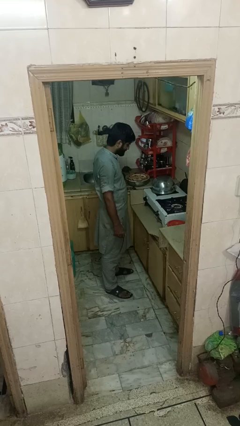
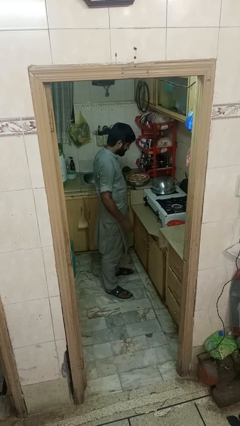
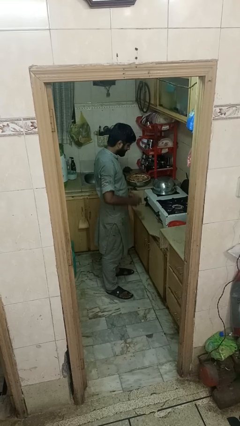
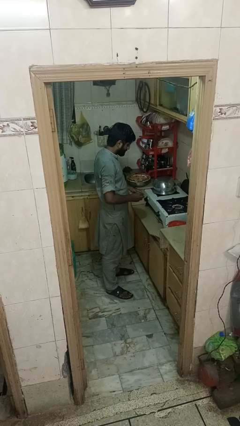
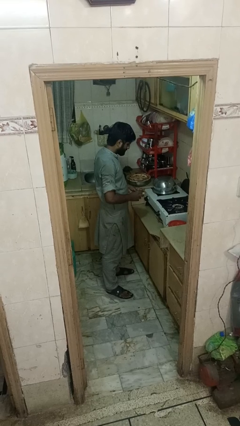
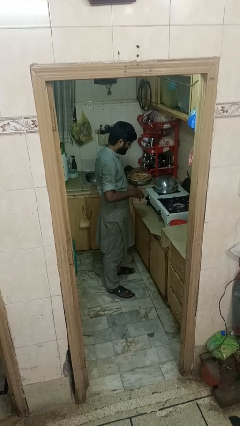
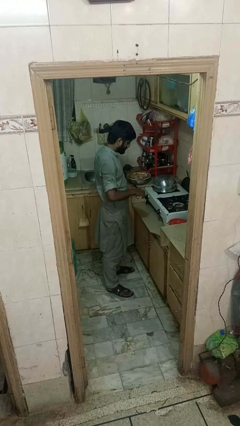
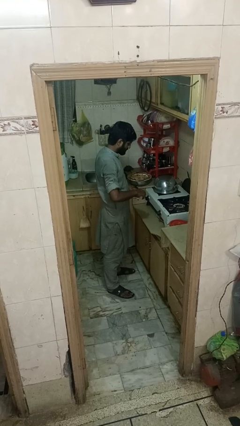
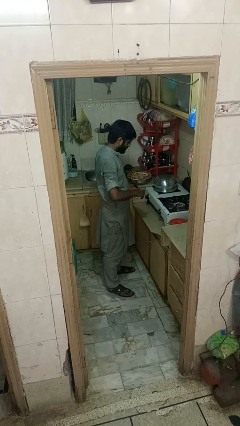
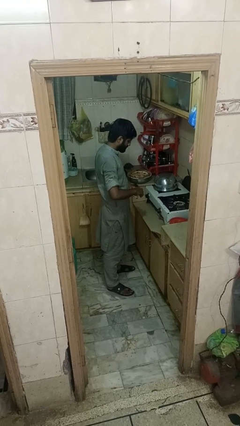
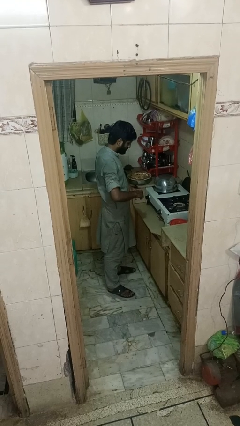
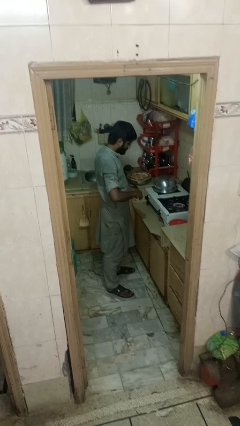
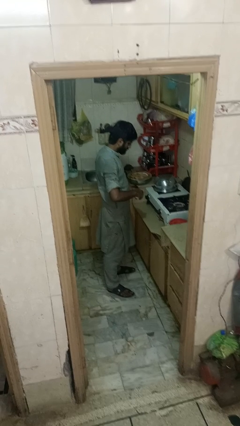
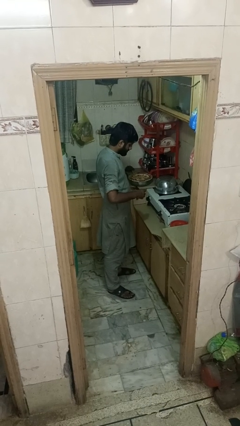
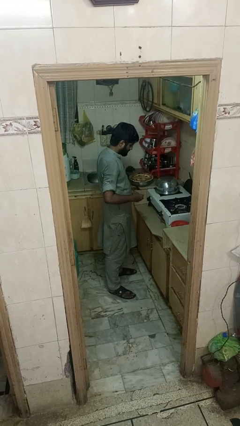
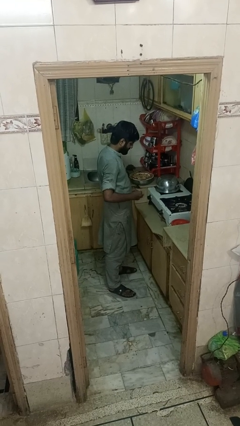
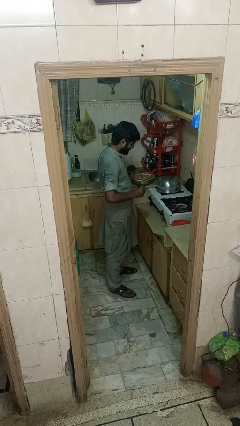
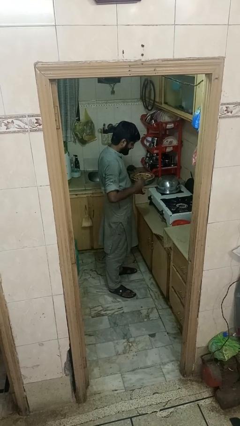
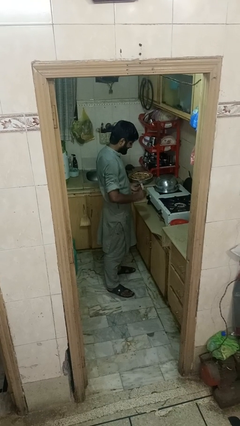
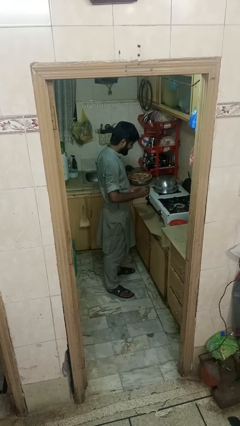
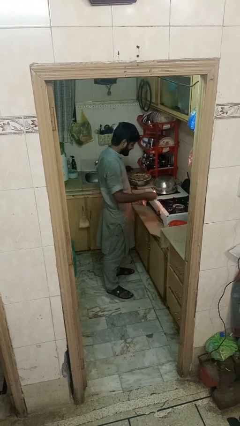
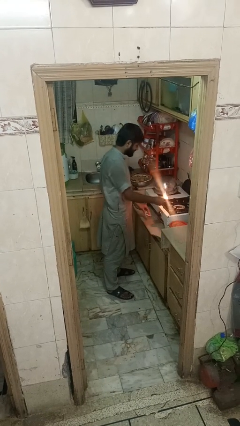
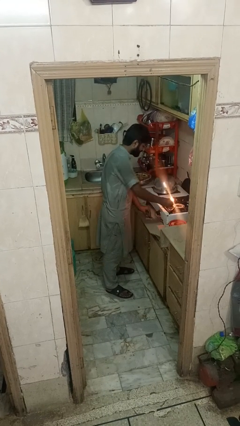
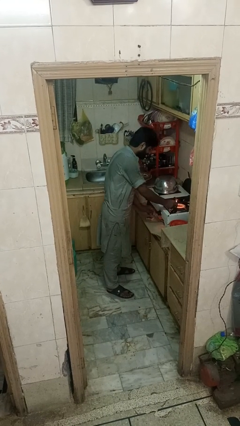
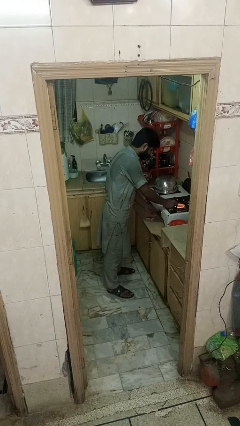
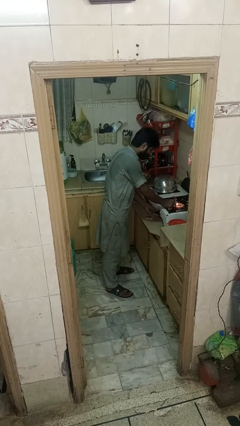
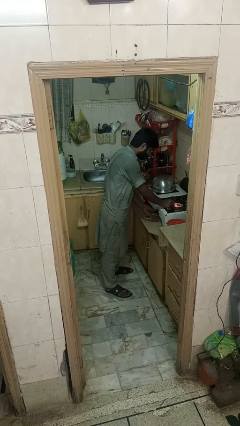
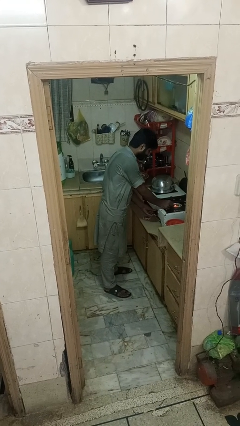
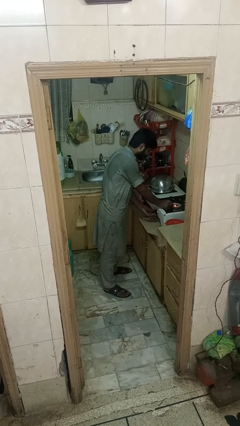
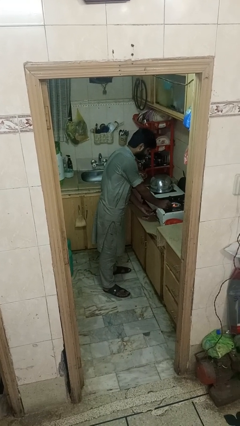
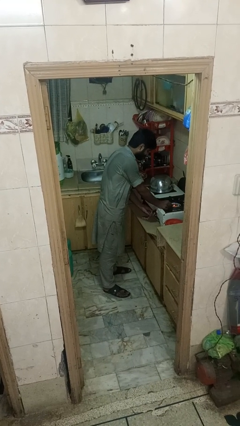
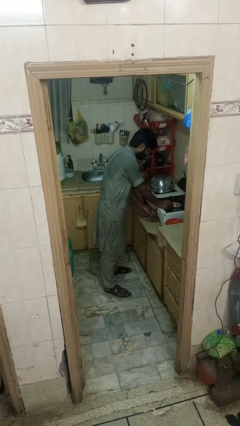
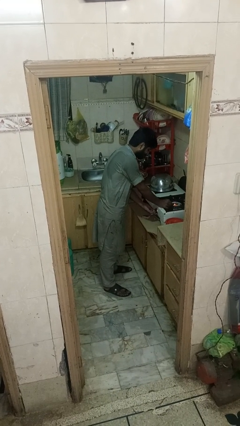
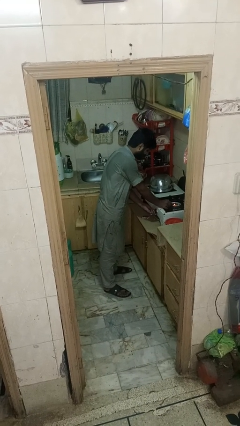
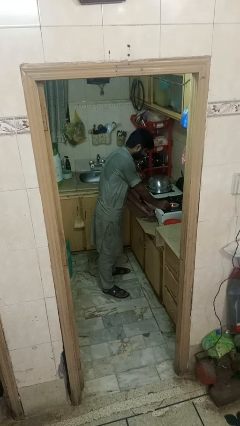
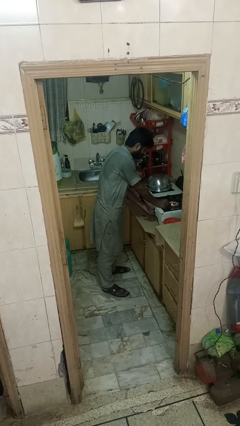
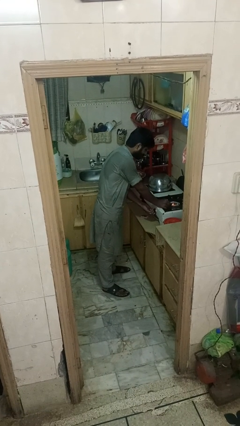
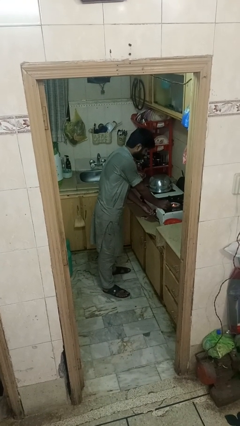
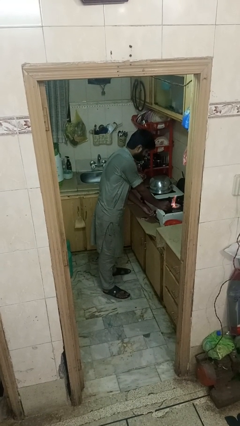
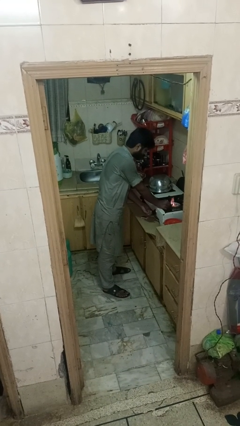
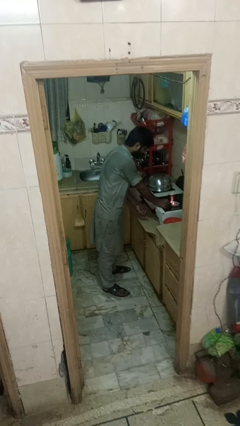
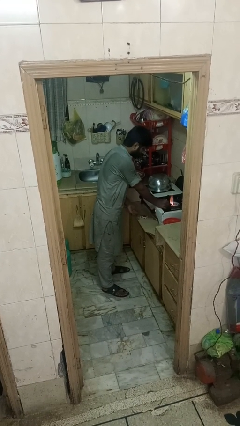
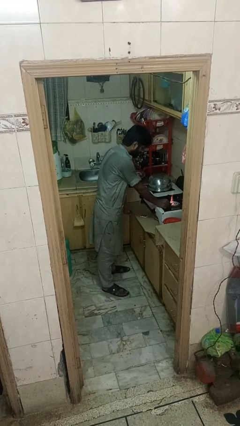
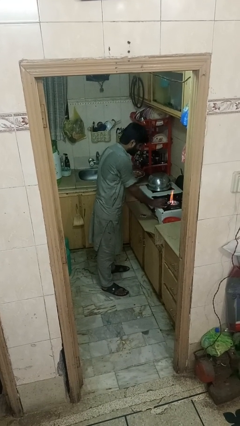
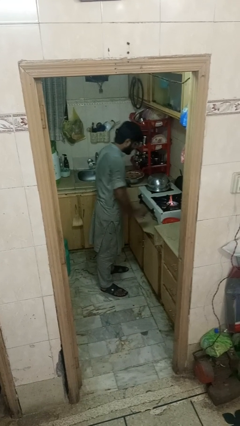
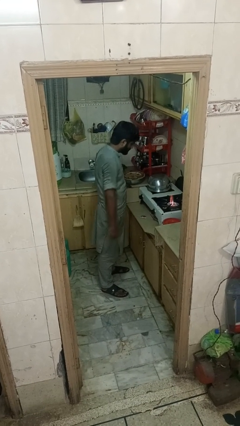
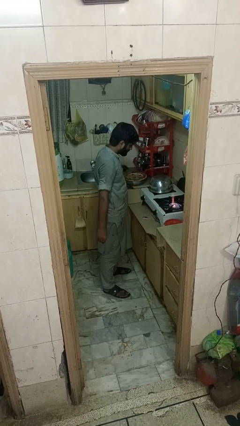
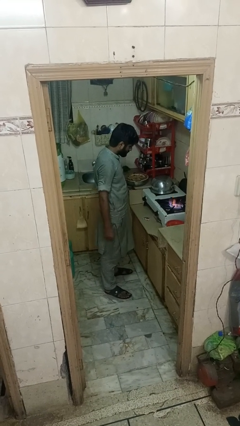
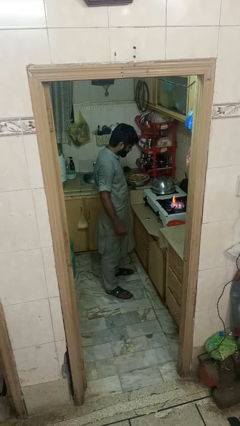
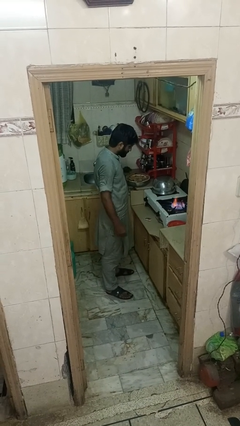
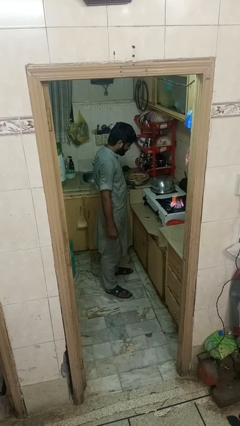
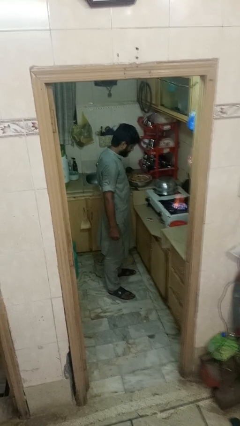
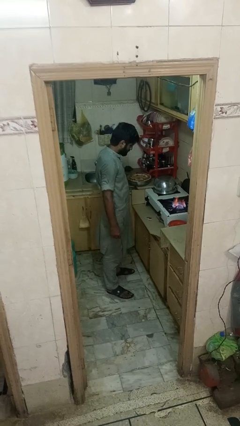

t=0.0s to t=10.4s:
person turns on stovetop

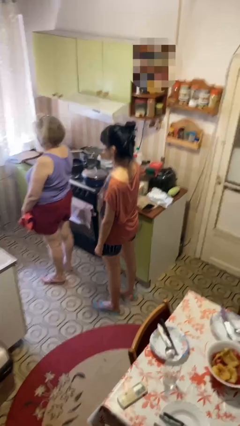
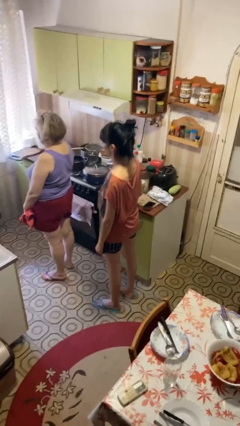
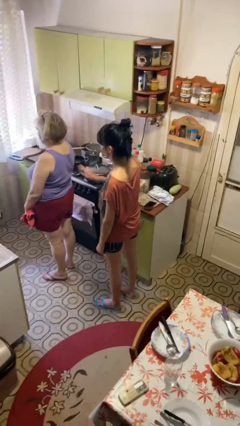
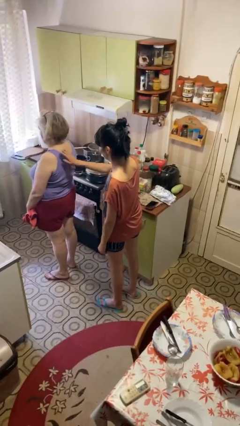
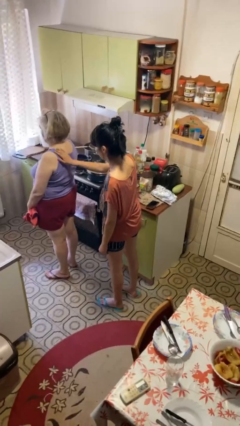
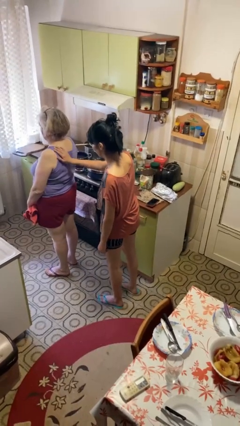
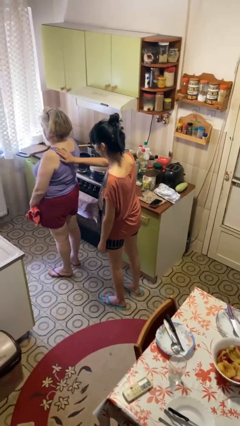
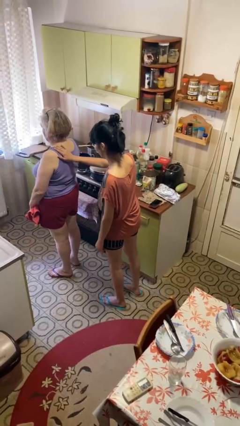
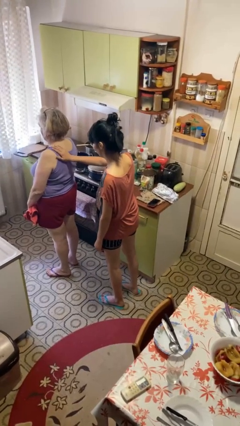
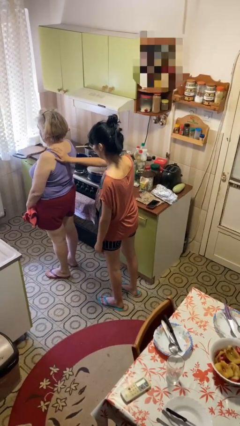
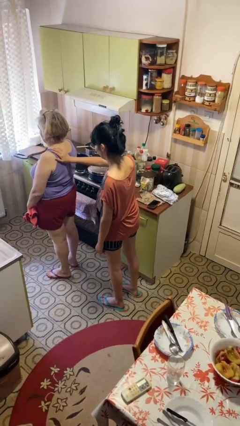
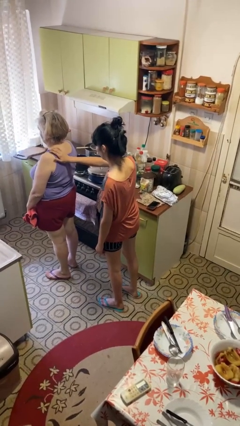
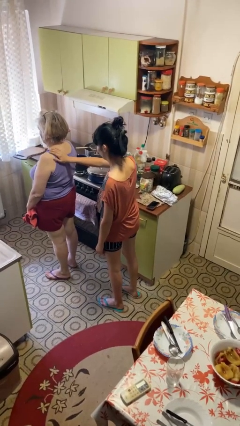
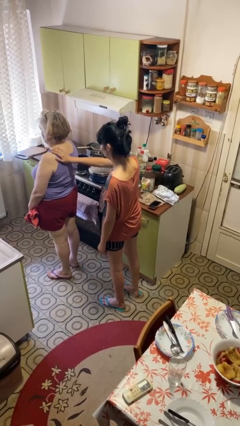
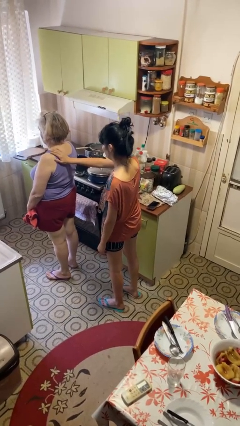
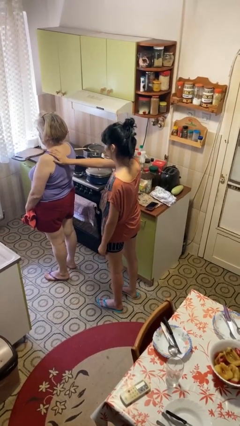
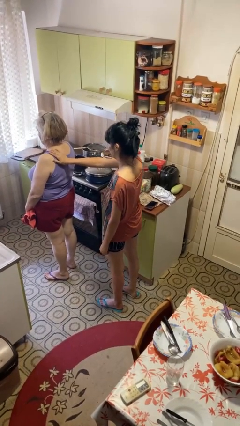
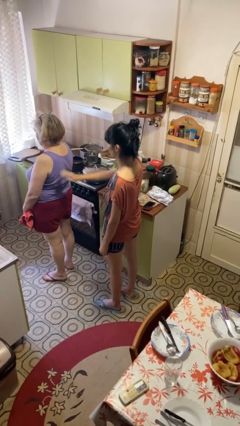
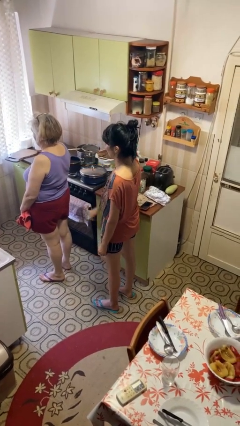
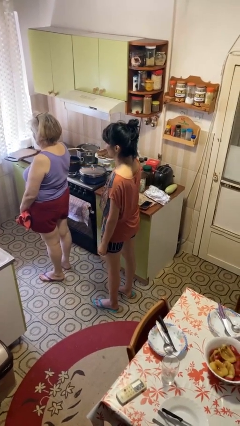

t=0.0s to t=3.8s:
person touches back of person

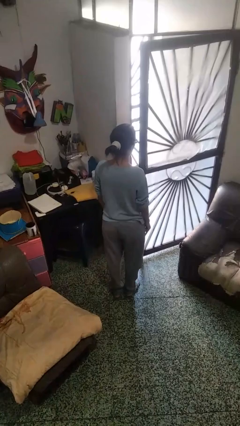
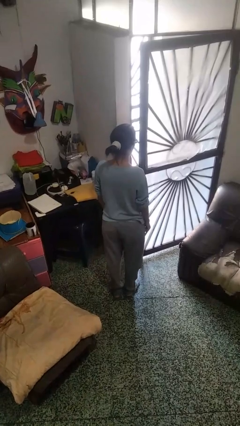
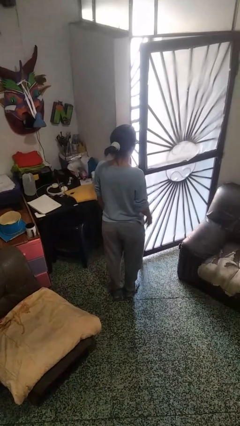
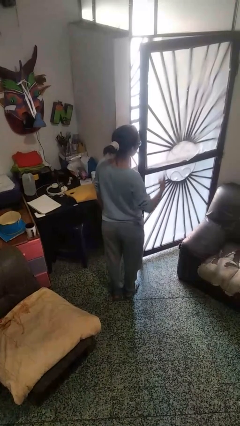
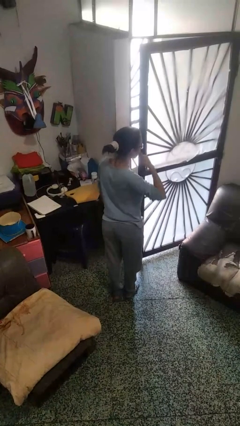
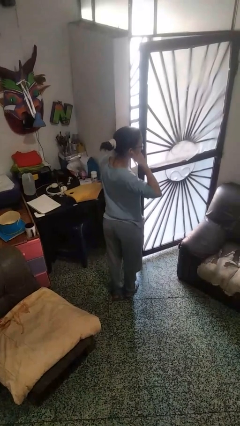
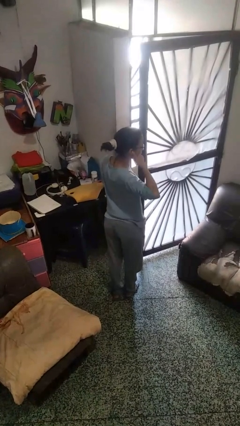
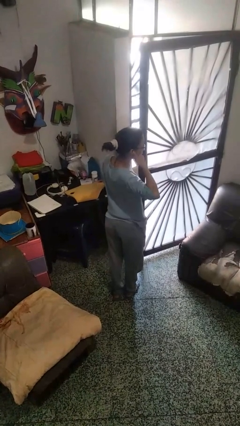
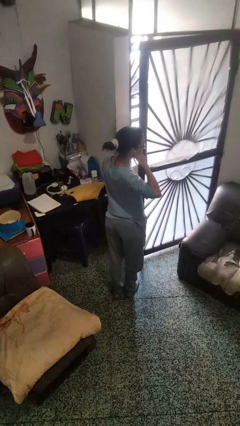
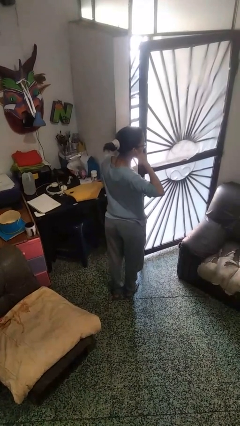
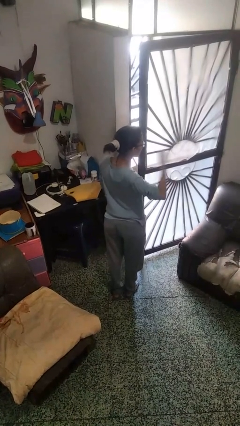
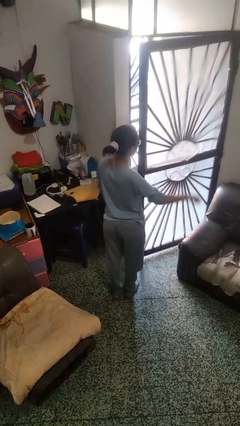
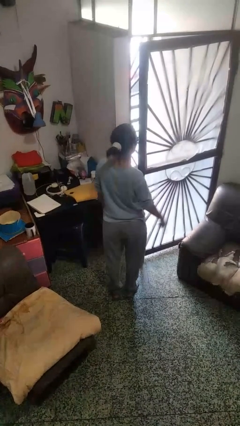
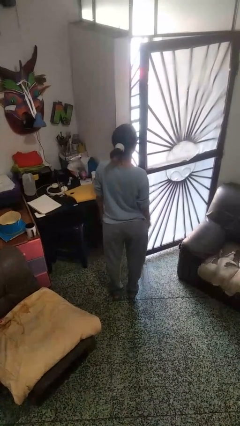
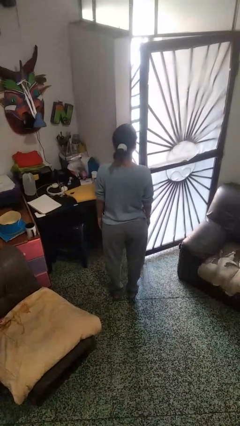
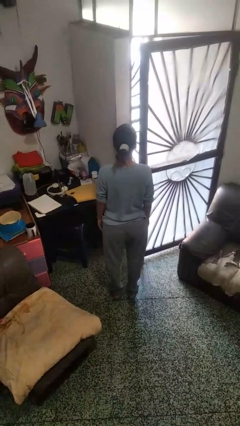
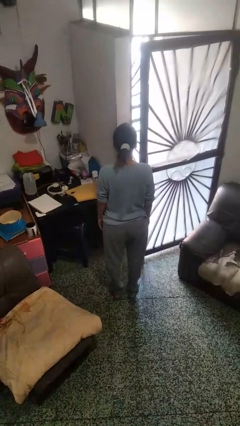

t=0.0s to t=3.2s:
person gestures call me

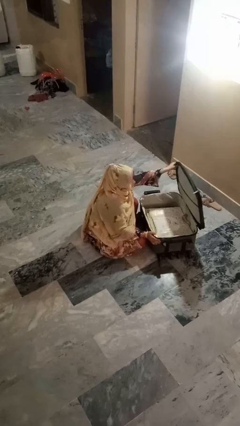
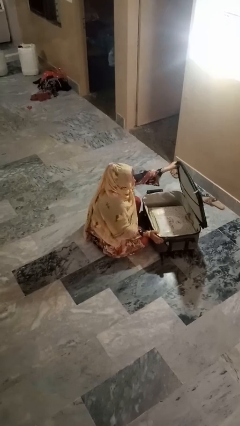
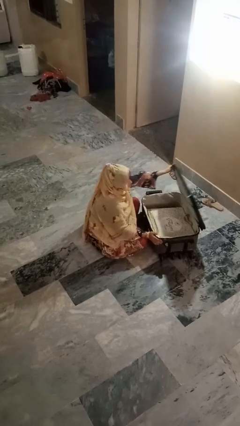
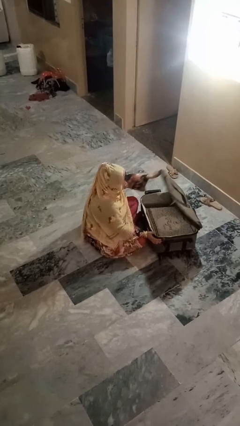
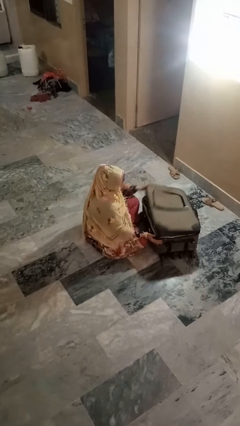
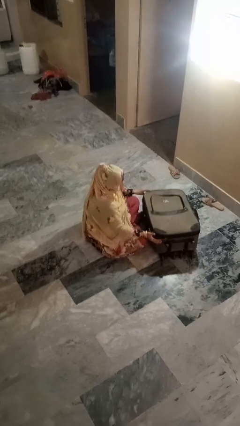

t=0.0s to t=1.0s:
person closes suitcase
